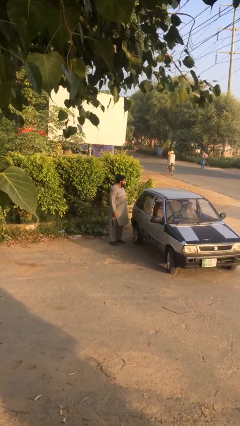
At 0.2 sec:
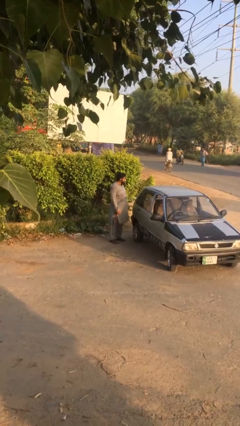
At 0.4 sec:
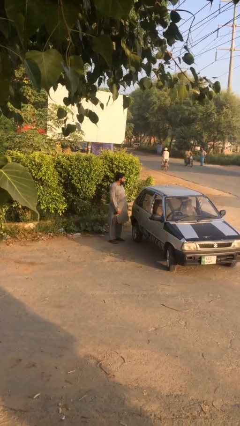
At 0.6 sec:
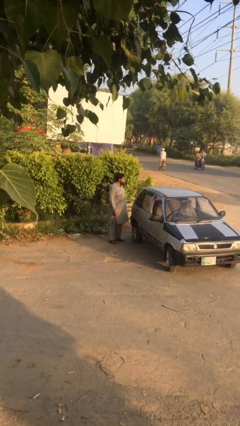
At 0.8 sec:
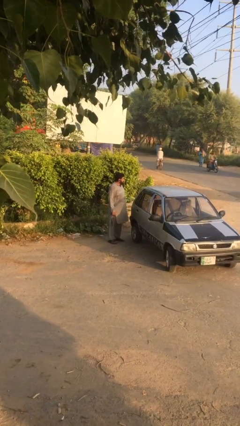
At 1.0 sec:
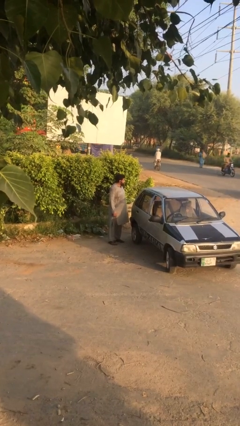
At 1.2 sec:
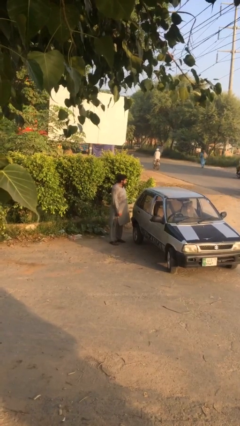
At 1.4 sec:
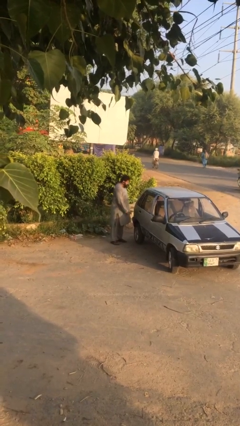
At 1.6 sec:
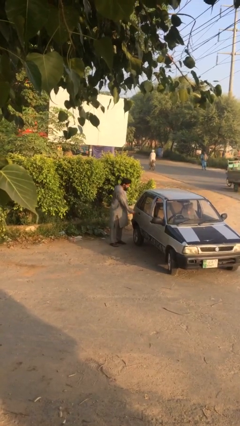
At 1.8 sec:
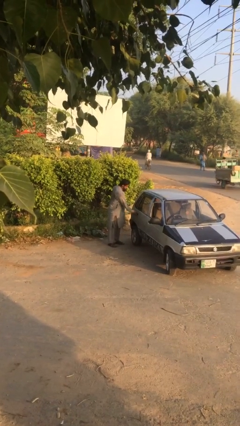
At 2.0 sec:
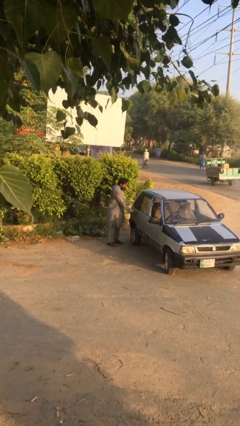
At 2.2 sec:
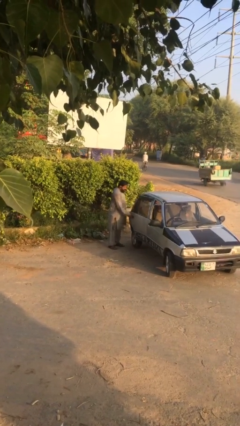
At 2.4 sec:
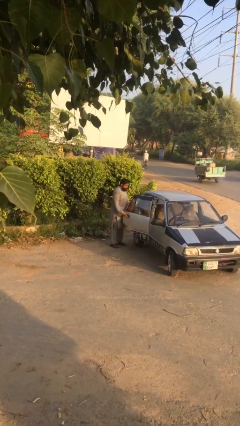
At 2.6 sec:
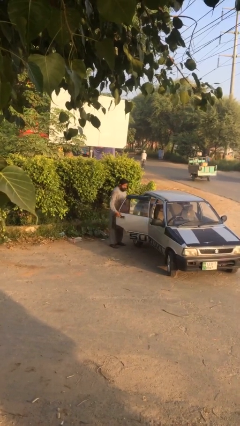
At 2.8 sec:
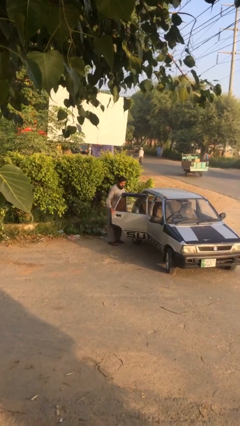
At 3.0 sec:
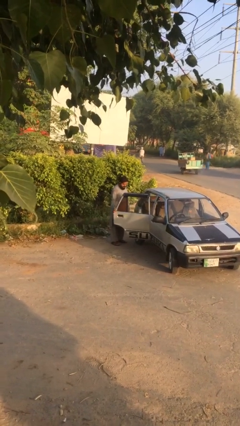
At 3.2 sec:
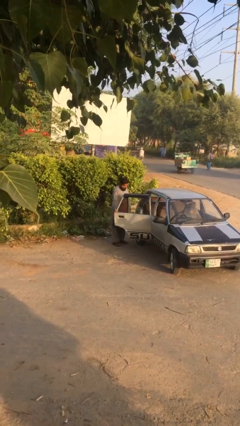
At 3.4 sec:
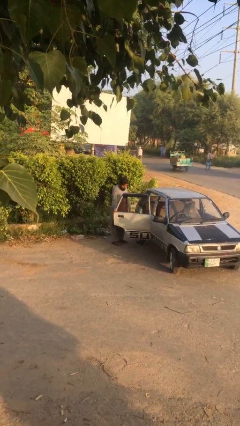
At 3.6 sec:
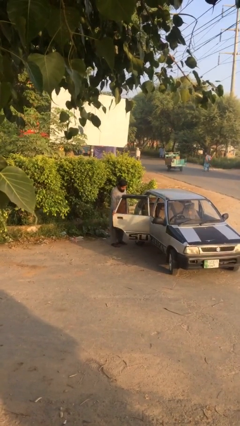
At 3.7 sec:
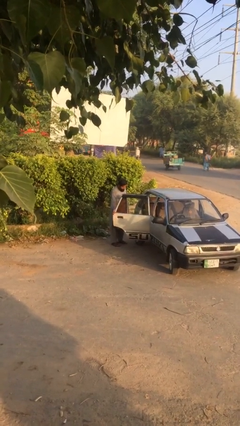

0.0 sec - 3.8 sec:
person opens car door

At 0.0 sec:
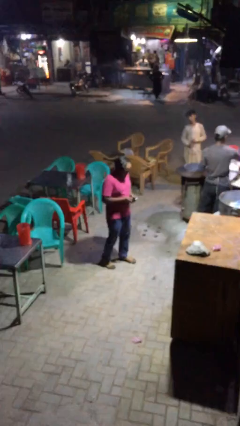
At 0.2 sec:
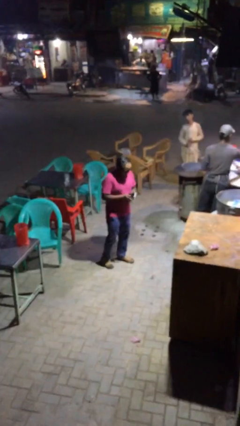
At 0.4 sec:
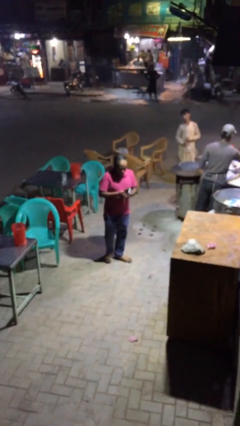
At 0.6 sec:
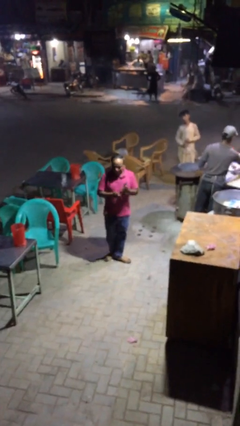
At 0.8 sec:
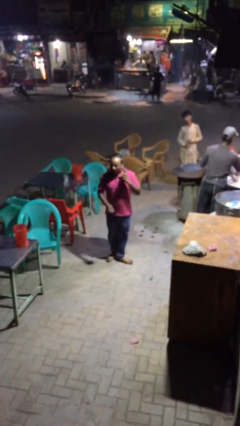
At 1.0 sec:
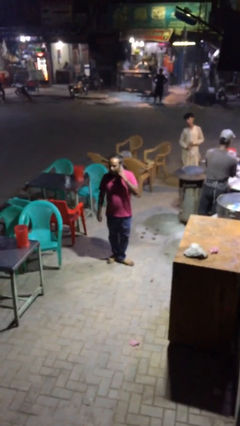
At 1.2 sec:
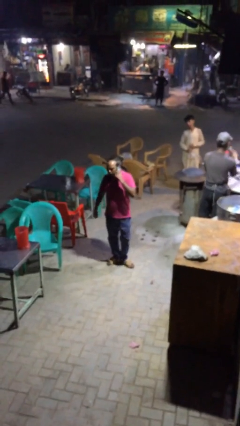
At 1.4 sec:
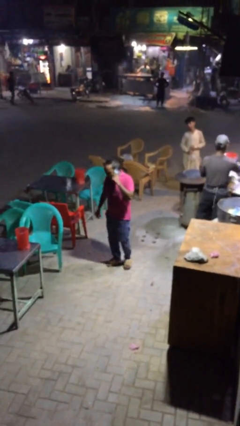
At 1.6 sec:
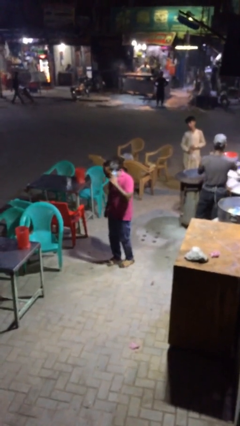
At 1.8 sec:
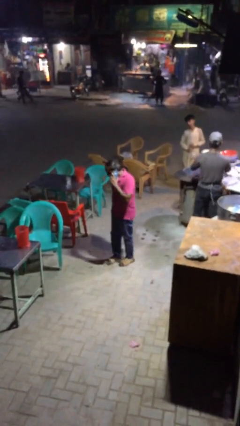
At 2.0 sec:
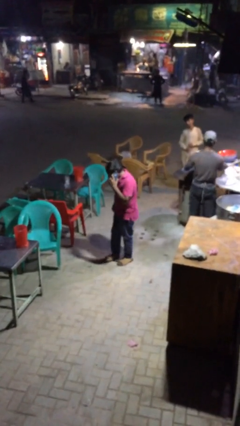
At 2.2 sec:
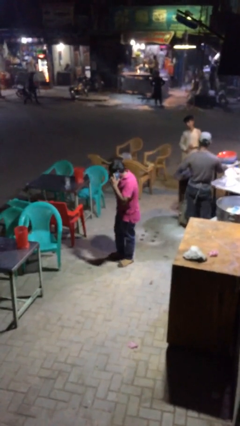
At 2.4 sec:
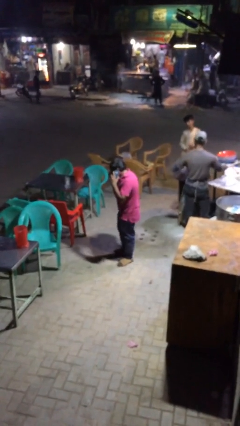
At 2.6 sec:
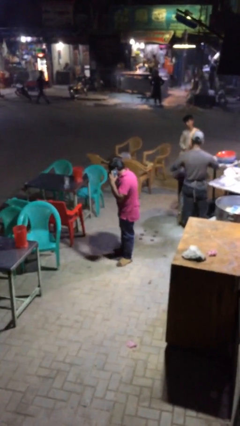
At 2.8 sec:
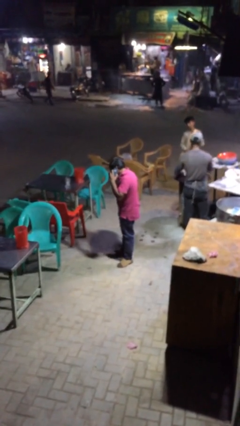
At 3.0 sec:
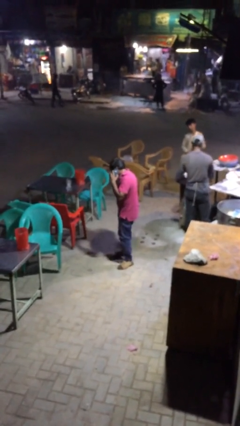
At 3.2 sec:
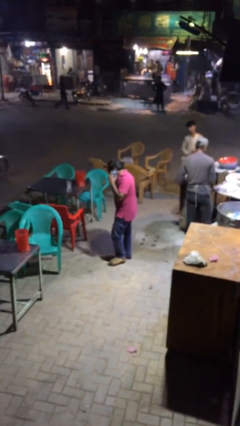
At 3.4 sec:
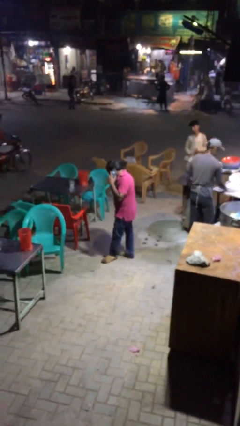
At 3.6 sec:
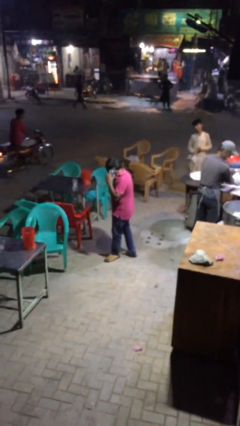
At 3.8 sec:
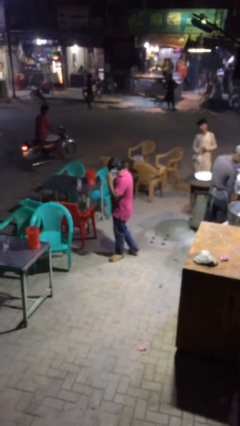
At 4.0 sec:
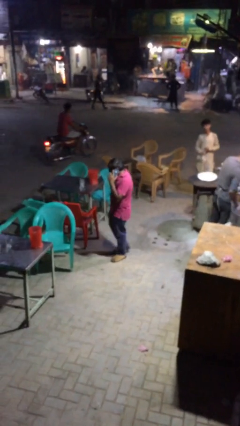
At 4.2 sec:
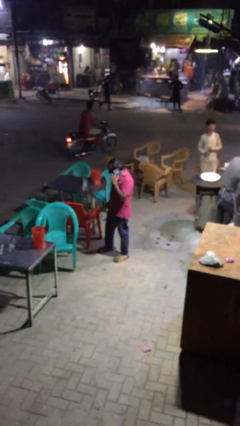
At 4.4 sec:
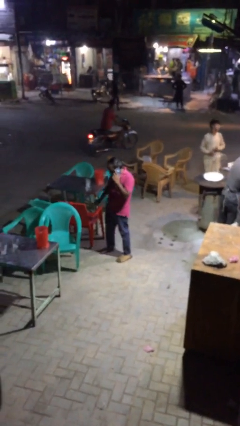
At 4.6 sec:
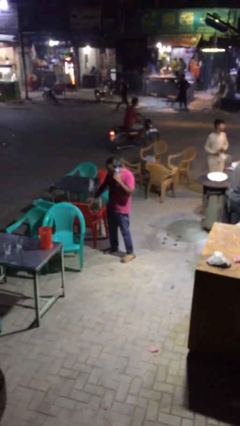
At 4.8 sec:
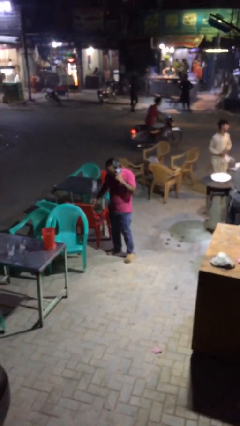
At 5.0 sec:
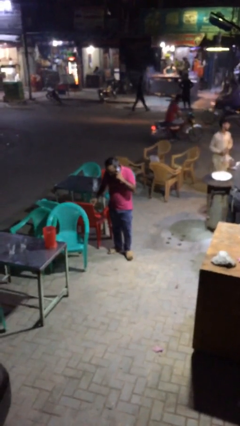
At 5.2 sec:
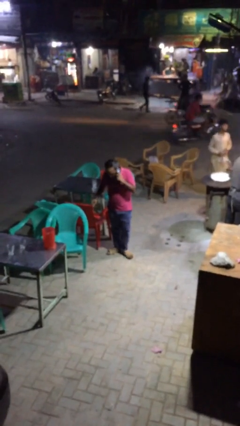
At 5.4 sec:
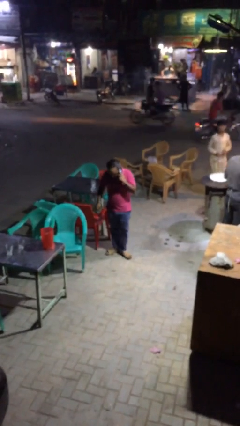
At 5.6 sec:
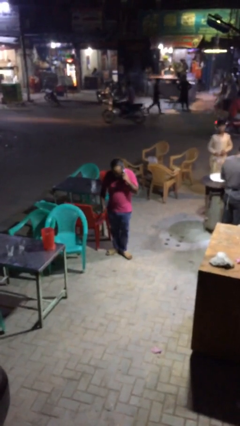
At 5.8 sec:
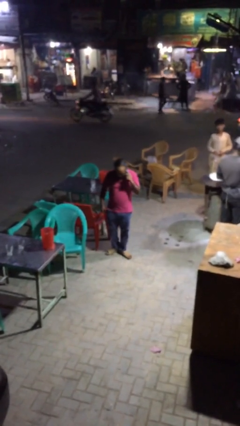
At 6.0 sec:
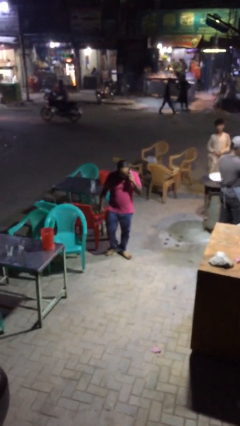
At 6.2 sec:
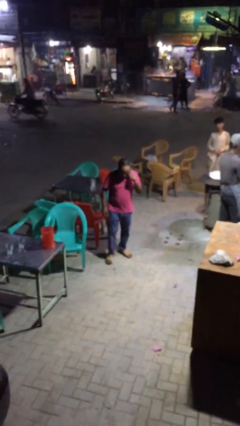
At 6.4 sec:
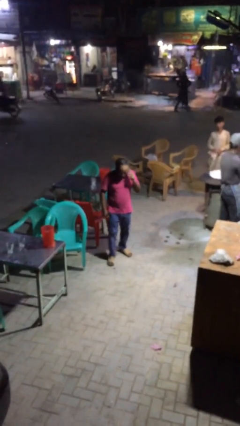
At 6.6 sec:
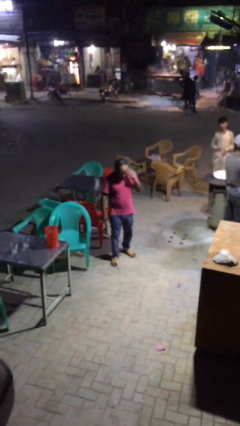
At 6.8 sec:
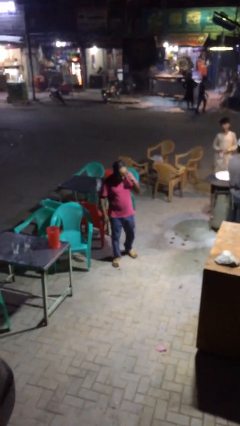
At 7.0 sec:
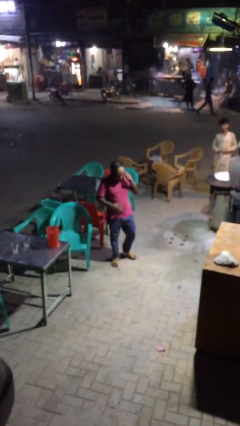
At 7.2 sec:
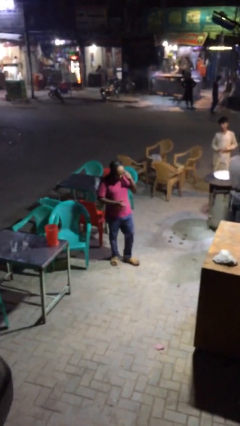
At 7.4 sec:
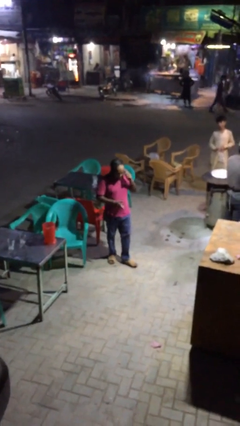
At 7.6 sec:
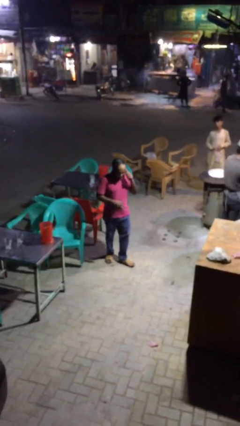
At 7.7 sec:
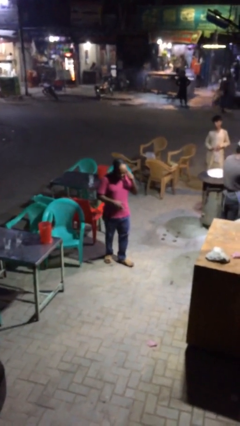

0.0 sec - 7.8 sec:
person talks on phone

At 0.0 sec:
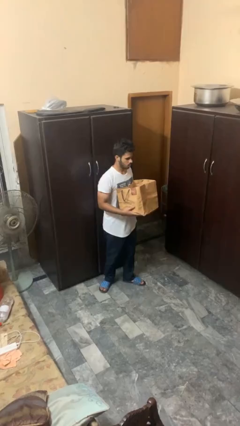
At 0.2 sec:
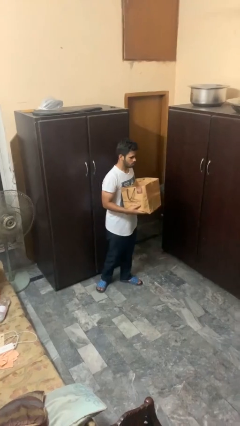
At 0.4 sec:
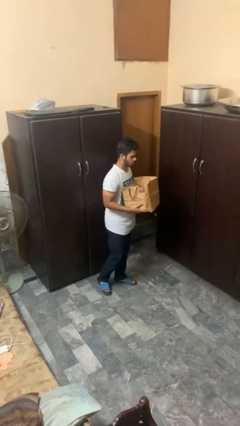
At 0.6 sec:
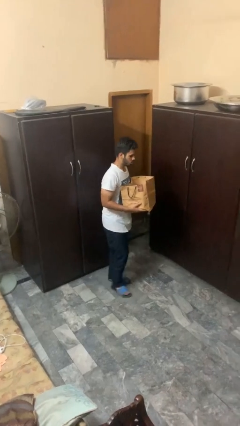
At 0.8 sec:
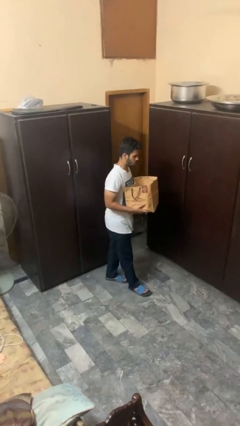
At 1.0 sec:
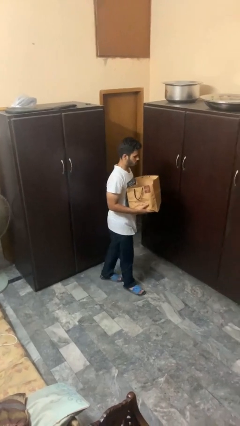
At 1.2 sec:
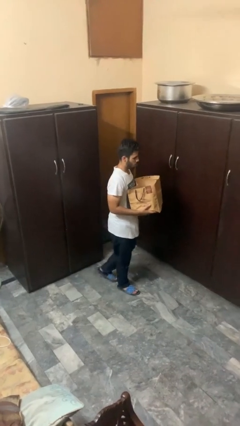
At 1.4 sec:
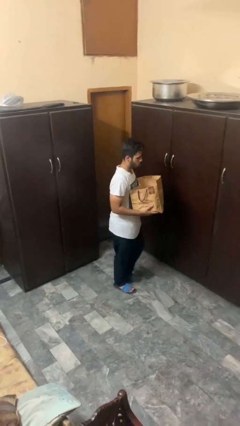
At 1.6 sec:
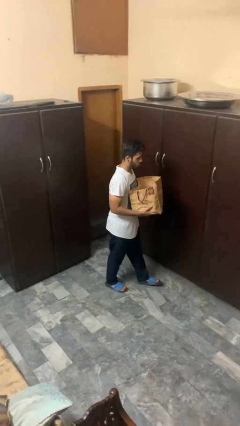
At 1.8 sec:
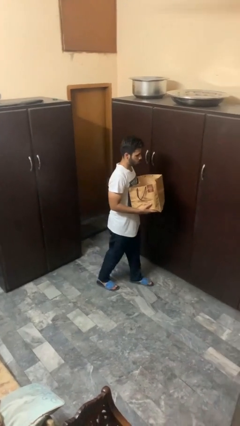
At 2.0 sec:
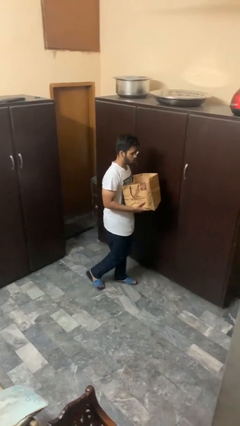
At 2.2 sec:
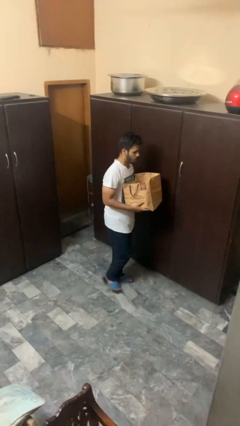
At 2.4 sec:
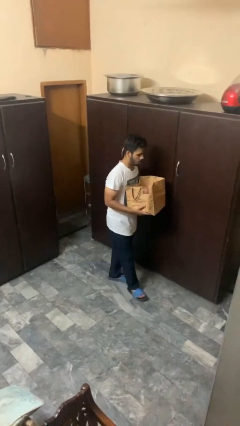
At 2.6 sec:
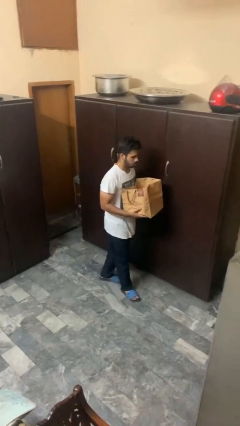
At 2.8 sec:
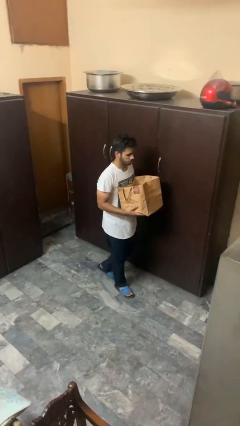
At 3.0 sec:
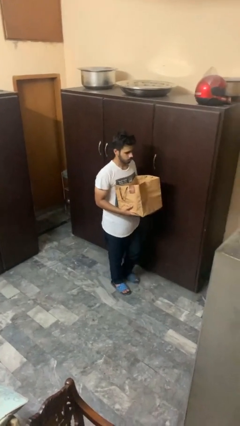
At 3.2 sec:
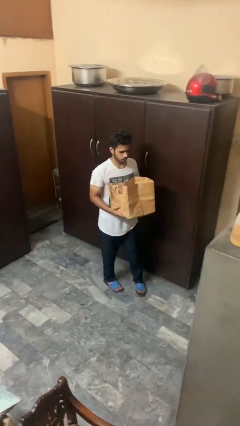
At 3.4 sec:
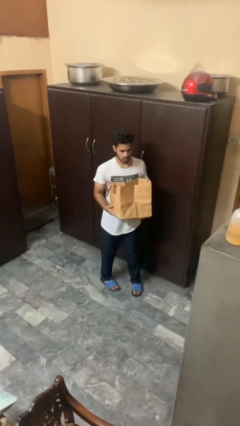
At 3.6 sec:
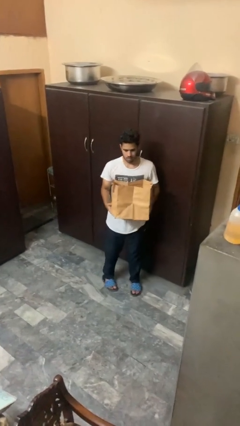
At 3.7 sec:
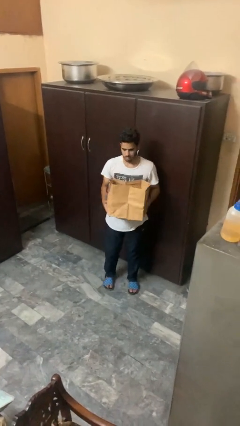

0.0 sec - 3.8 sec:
person carries groceries

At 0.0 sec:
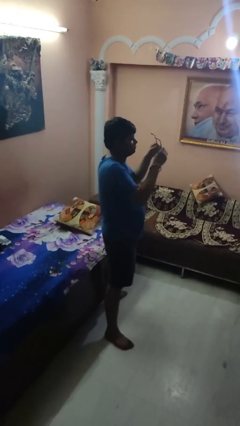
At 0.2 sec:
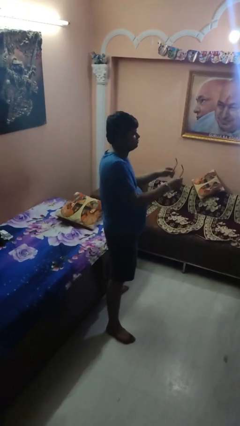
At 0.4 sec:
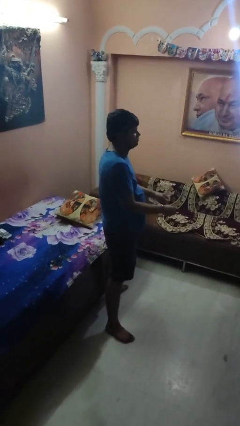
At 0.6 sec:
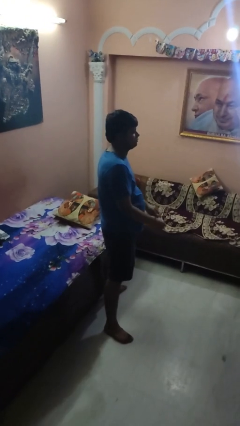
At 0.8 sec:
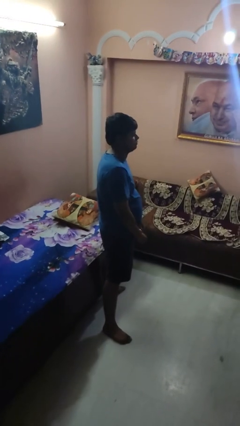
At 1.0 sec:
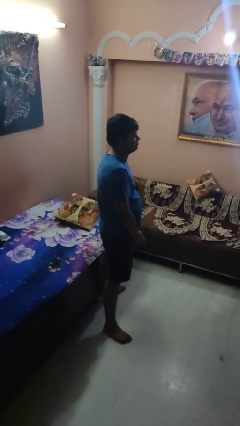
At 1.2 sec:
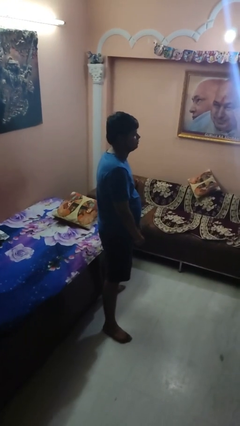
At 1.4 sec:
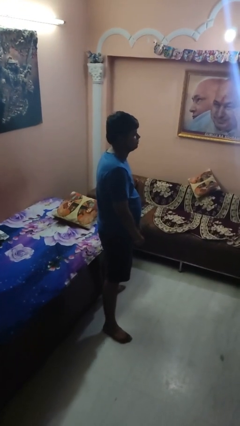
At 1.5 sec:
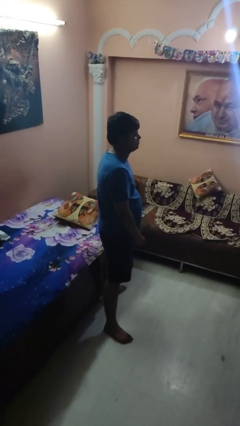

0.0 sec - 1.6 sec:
person takes off glasses

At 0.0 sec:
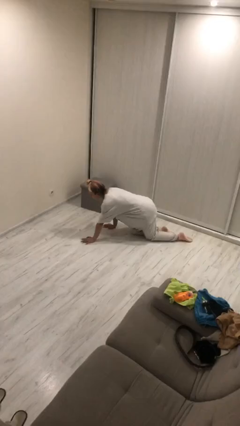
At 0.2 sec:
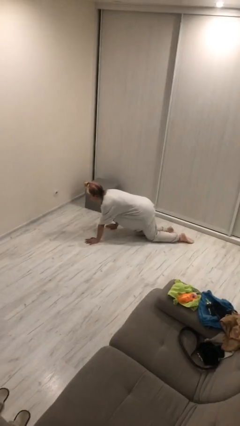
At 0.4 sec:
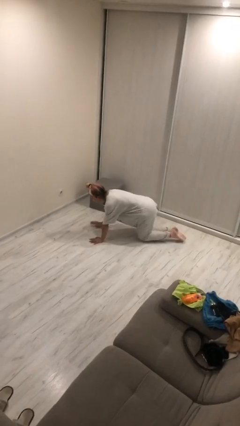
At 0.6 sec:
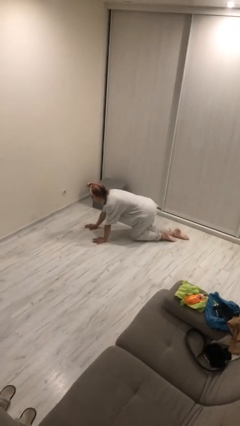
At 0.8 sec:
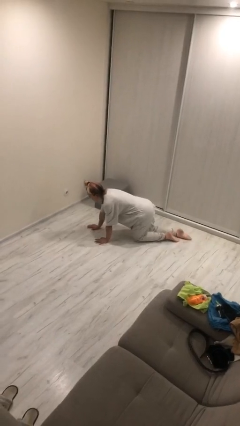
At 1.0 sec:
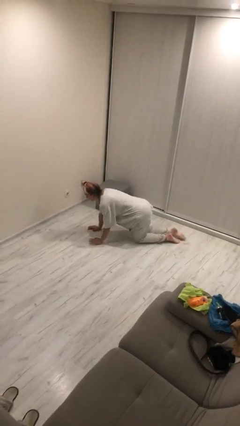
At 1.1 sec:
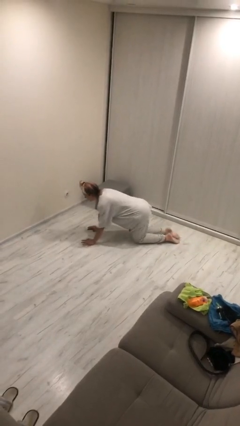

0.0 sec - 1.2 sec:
person crawls
